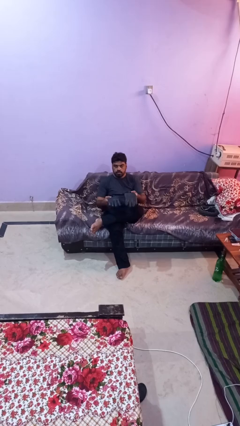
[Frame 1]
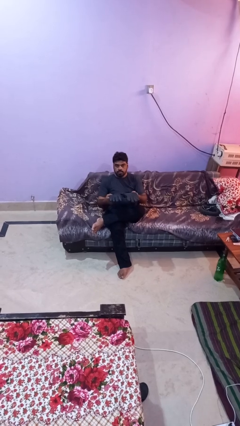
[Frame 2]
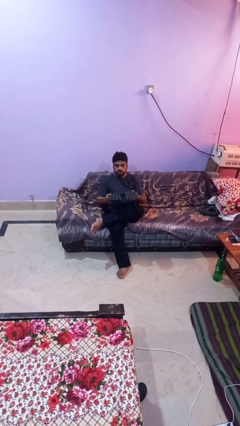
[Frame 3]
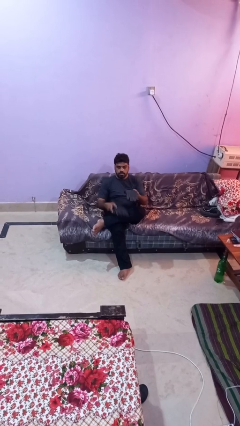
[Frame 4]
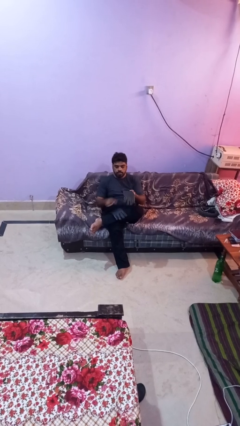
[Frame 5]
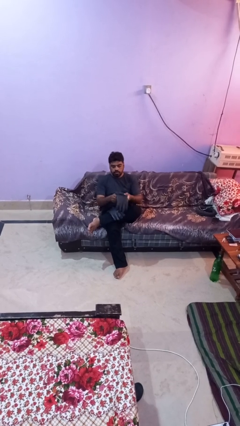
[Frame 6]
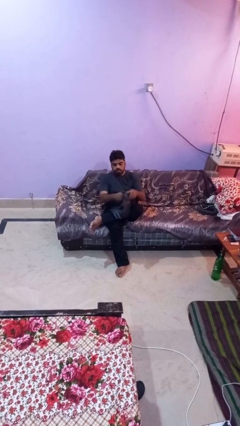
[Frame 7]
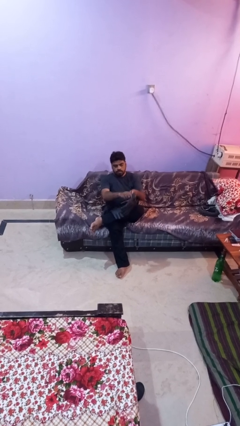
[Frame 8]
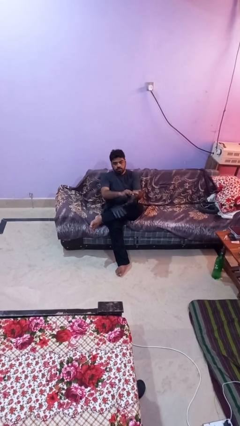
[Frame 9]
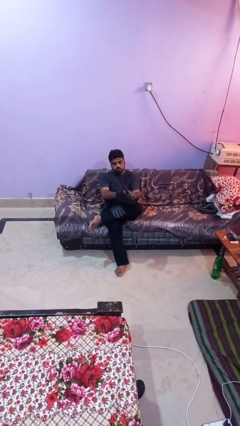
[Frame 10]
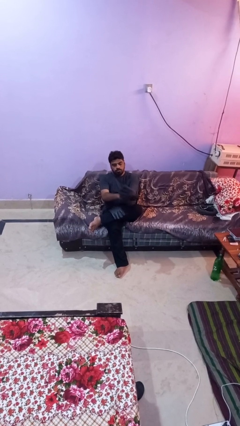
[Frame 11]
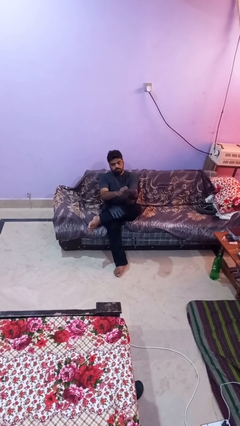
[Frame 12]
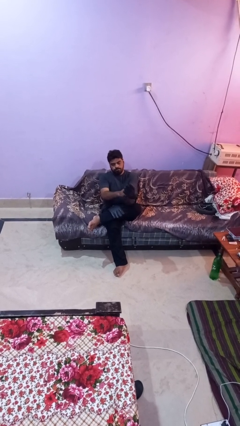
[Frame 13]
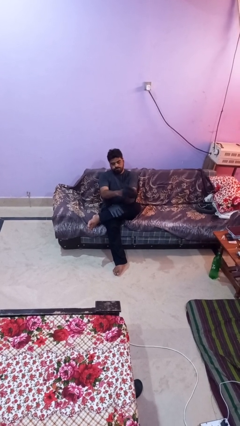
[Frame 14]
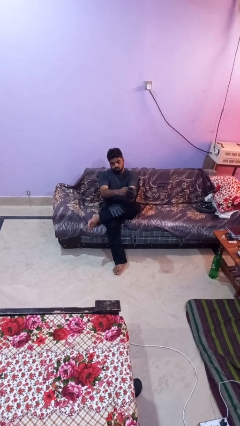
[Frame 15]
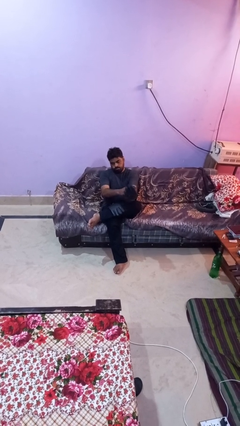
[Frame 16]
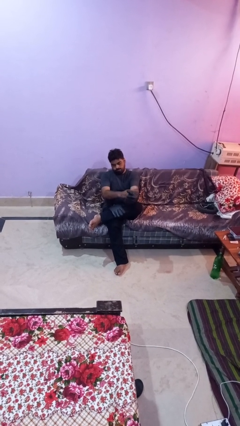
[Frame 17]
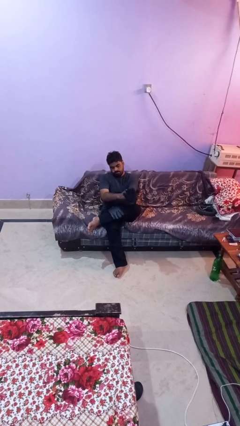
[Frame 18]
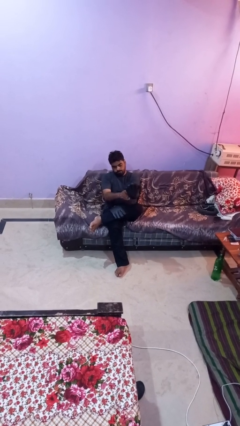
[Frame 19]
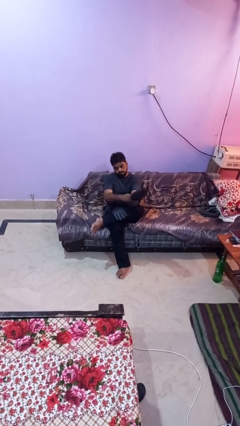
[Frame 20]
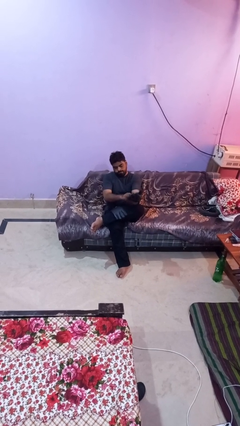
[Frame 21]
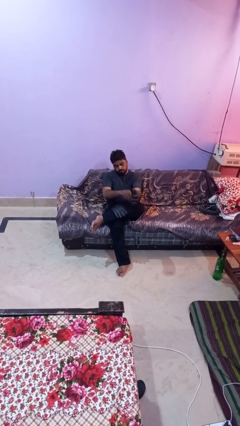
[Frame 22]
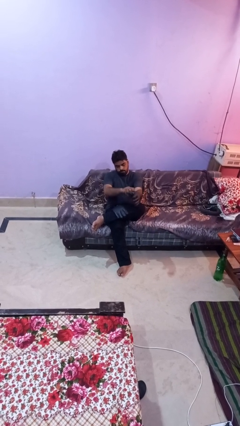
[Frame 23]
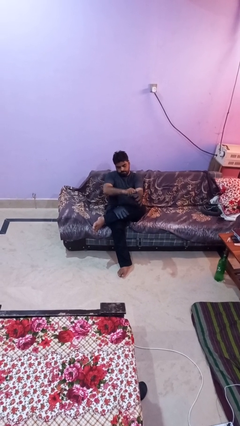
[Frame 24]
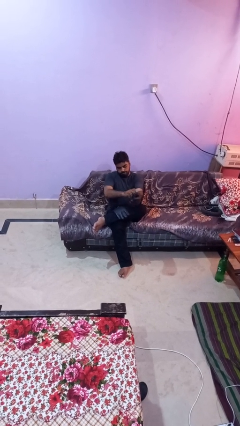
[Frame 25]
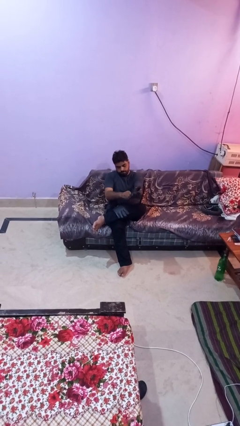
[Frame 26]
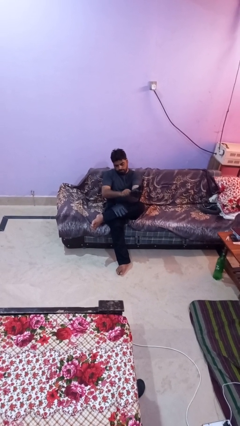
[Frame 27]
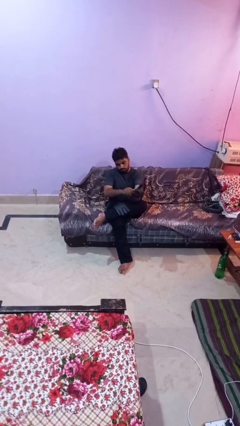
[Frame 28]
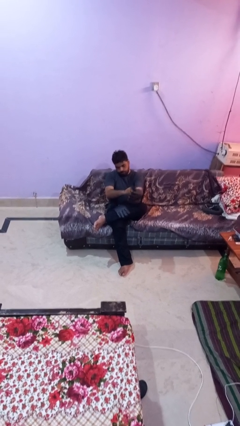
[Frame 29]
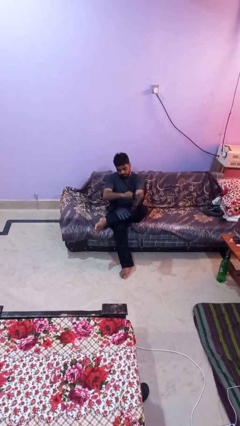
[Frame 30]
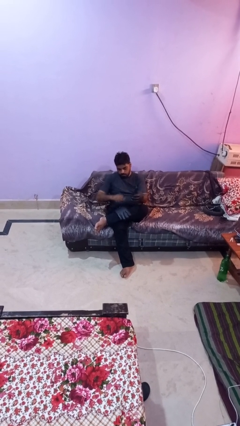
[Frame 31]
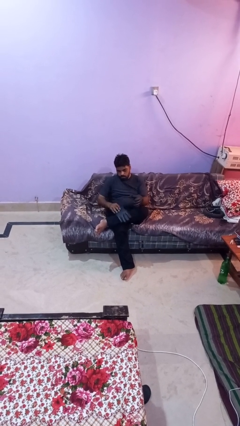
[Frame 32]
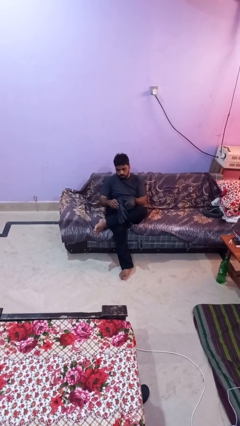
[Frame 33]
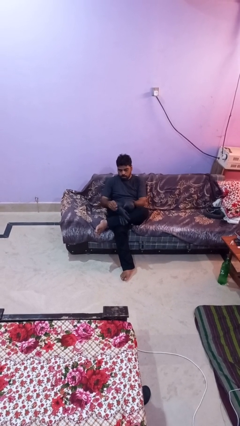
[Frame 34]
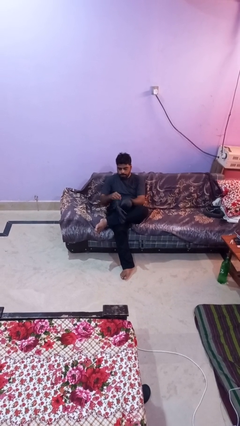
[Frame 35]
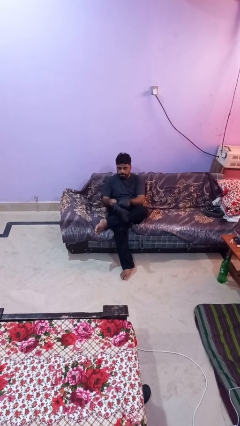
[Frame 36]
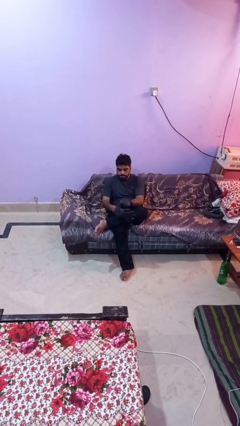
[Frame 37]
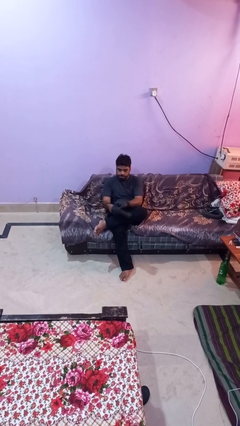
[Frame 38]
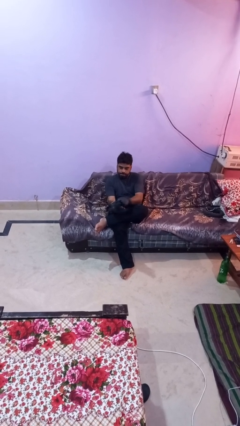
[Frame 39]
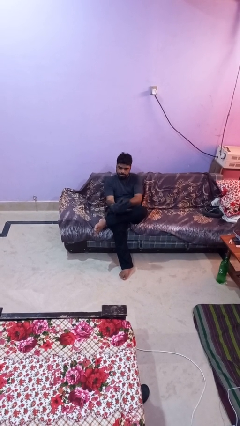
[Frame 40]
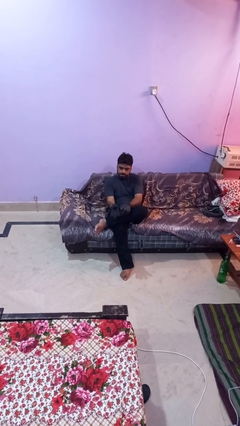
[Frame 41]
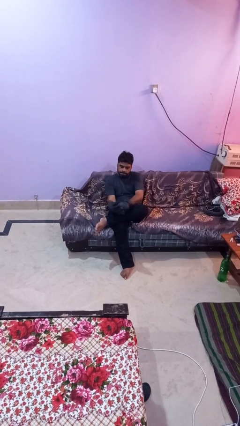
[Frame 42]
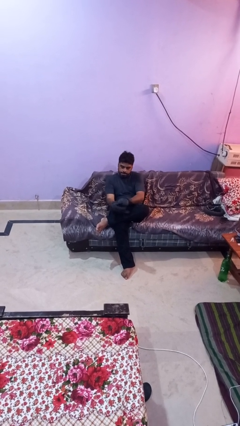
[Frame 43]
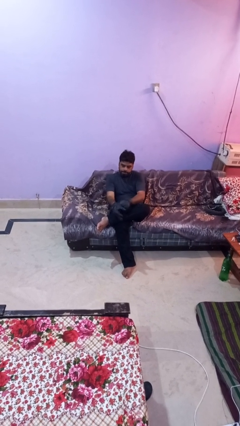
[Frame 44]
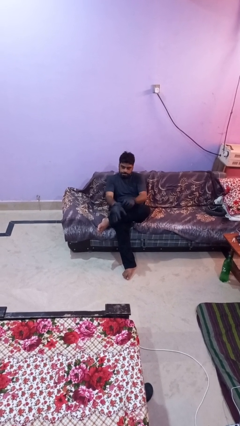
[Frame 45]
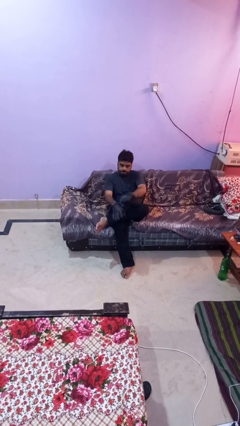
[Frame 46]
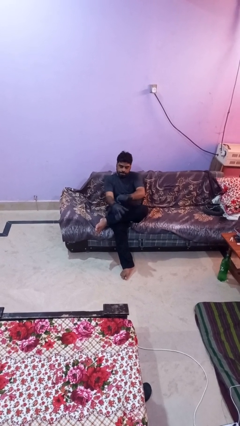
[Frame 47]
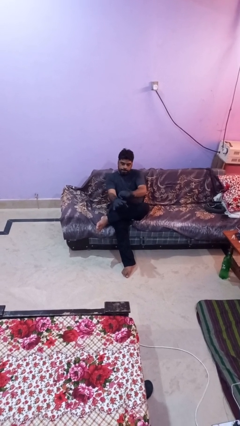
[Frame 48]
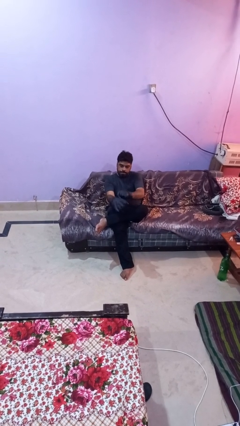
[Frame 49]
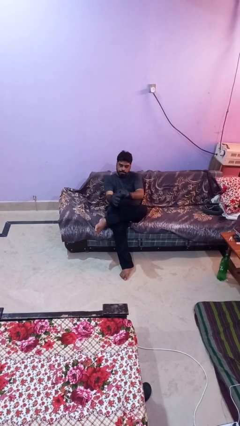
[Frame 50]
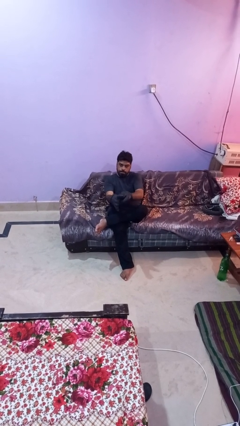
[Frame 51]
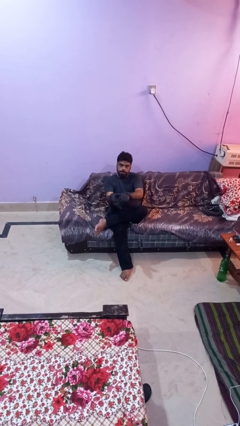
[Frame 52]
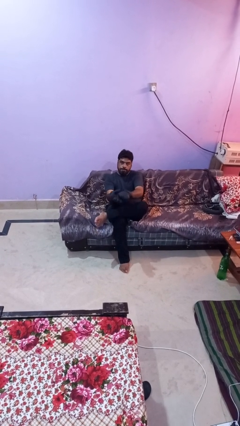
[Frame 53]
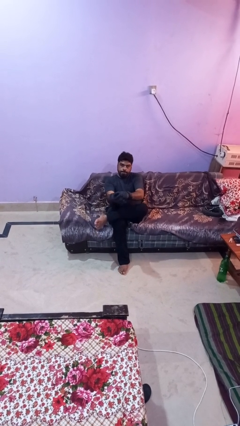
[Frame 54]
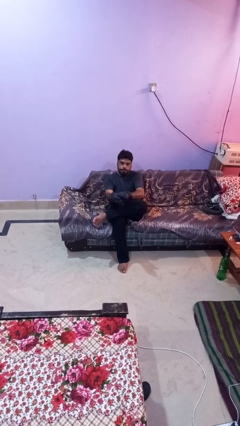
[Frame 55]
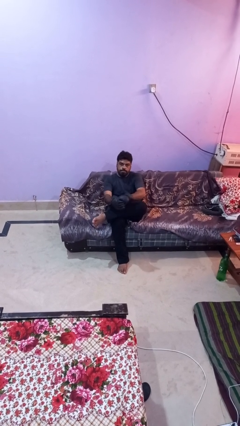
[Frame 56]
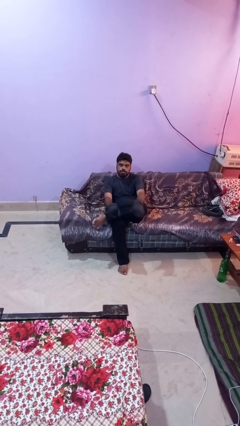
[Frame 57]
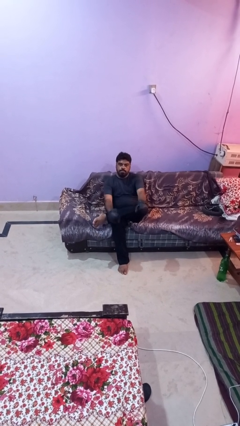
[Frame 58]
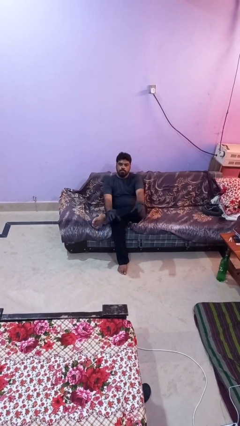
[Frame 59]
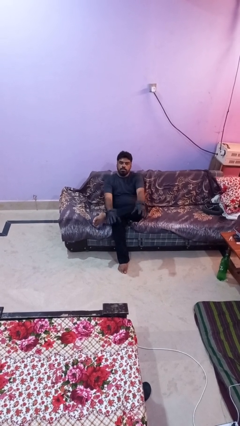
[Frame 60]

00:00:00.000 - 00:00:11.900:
person puts on gloves

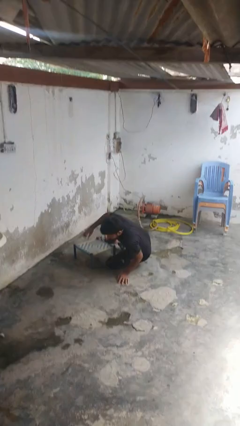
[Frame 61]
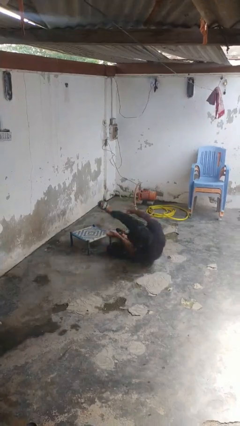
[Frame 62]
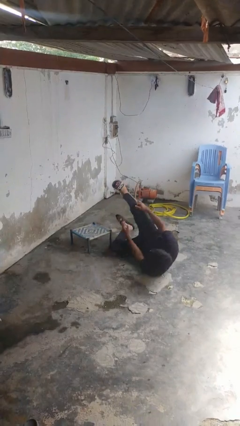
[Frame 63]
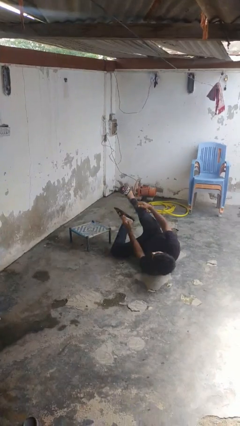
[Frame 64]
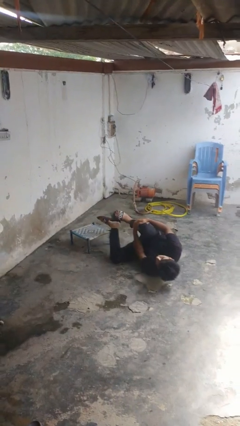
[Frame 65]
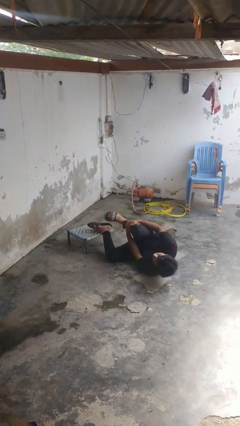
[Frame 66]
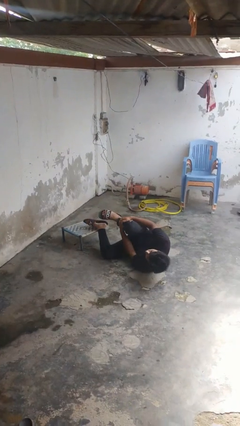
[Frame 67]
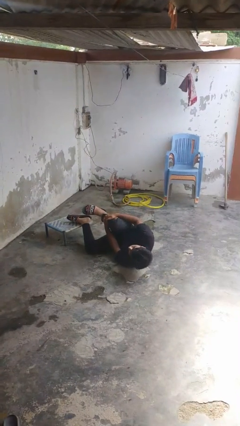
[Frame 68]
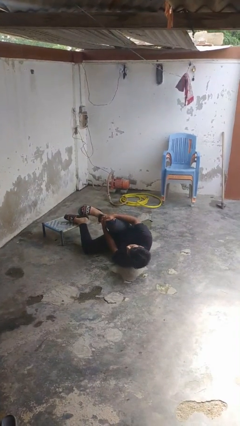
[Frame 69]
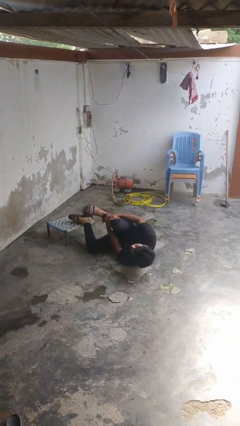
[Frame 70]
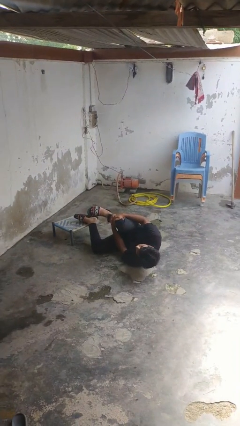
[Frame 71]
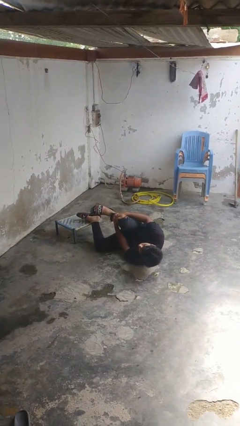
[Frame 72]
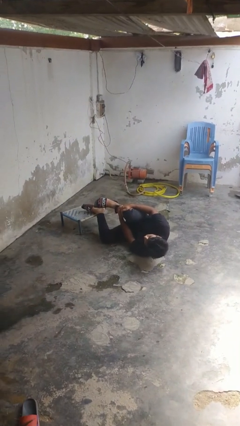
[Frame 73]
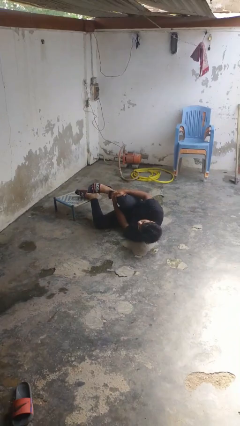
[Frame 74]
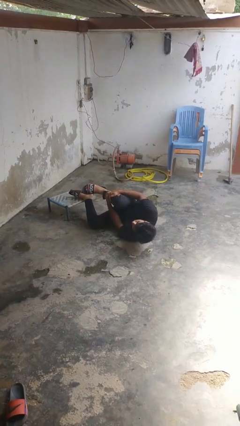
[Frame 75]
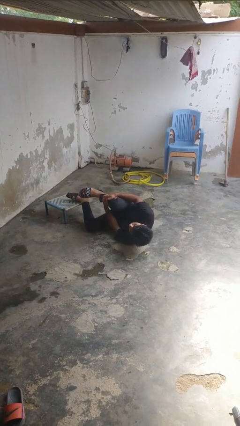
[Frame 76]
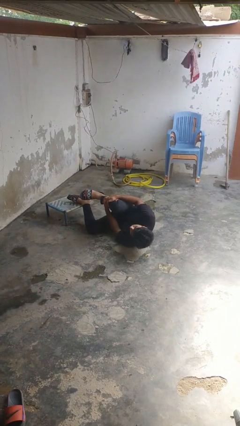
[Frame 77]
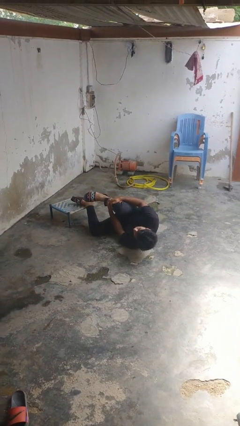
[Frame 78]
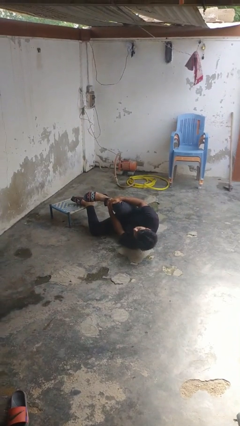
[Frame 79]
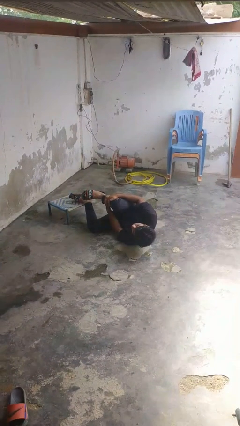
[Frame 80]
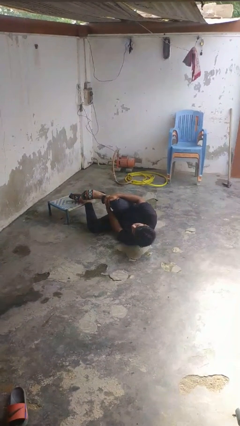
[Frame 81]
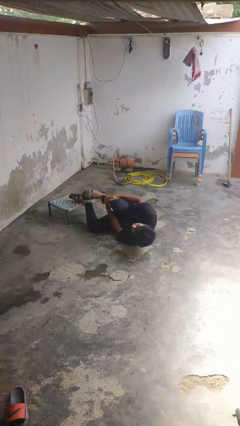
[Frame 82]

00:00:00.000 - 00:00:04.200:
person lies down on floor

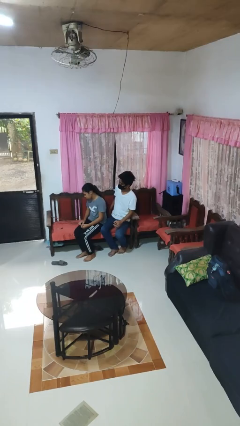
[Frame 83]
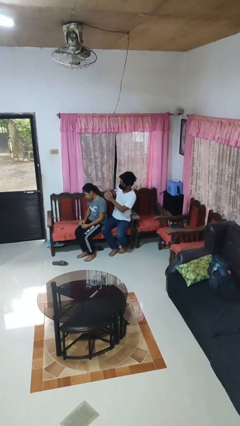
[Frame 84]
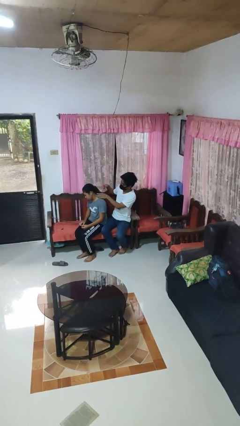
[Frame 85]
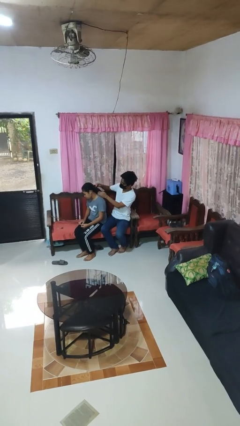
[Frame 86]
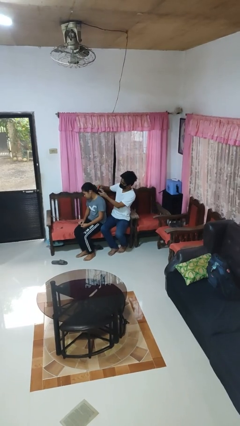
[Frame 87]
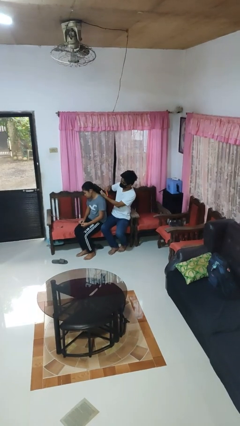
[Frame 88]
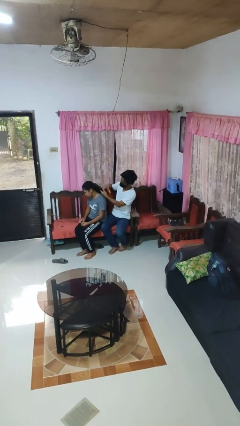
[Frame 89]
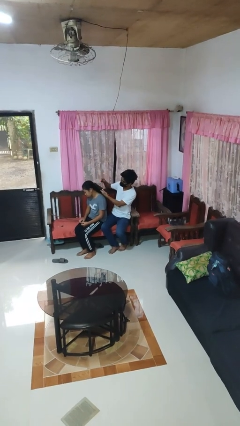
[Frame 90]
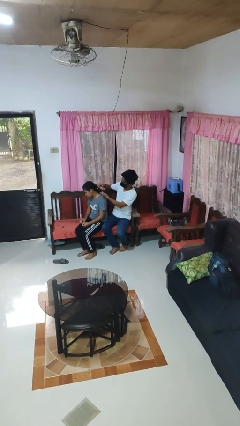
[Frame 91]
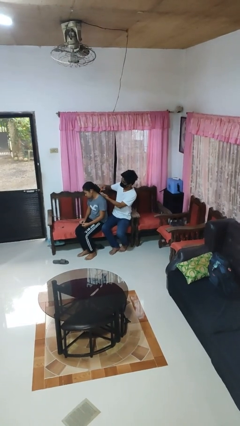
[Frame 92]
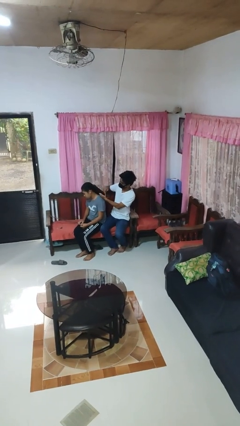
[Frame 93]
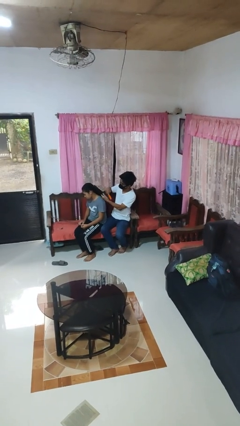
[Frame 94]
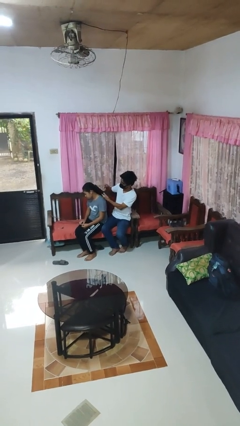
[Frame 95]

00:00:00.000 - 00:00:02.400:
person brushes hair of person
